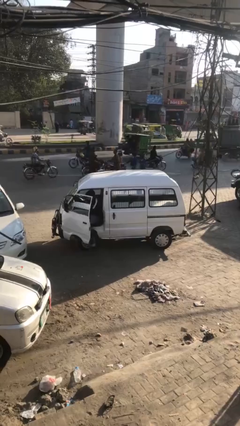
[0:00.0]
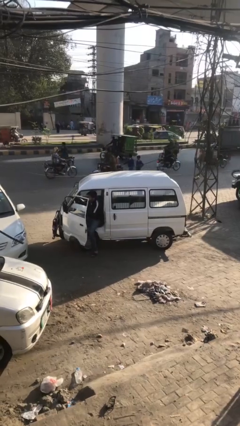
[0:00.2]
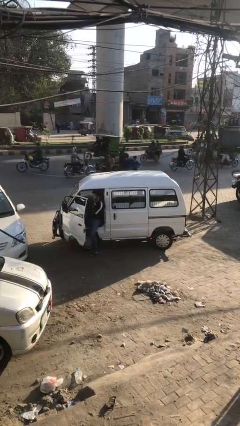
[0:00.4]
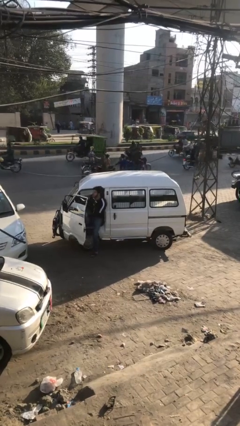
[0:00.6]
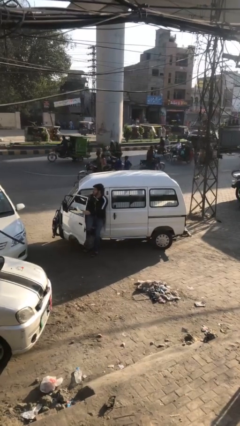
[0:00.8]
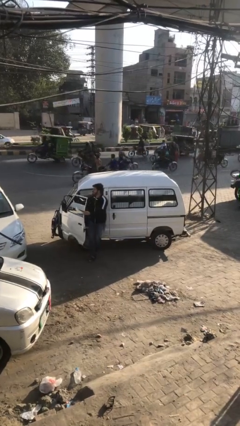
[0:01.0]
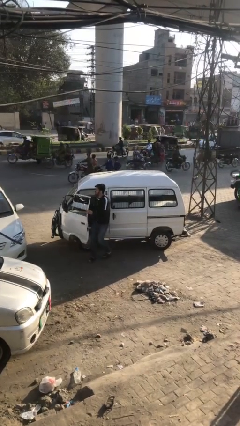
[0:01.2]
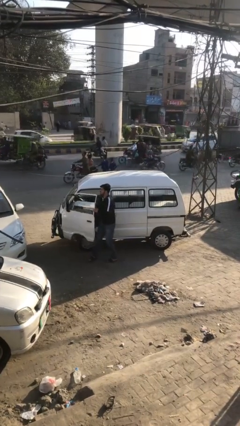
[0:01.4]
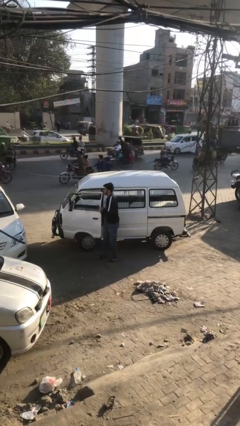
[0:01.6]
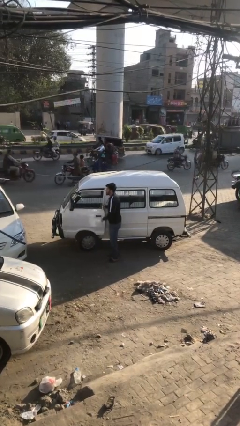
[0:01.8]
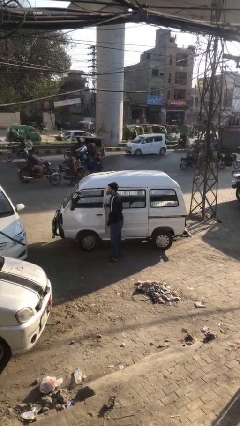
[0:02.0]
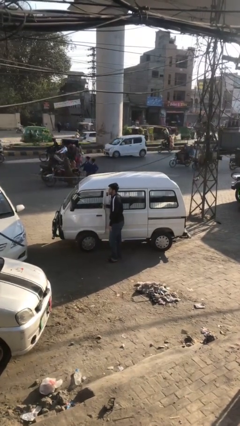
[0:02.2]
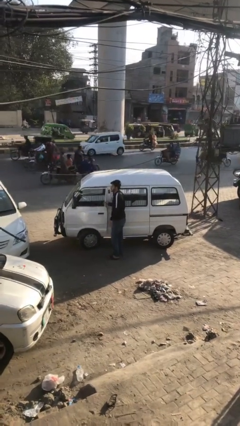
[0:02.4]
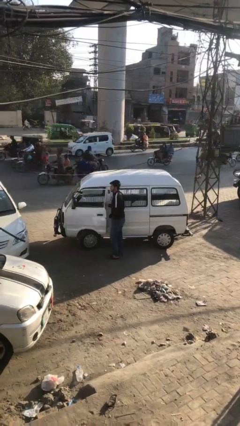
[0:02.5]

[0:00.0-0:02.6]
car drops off person

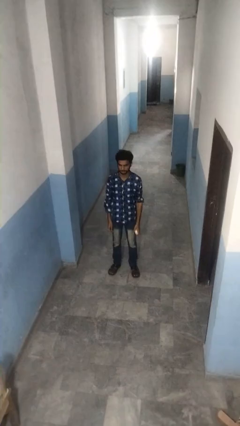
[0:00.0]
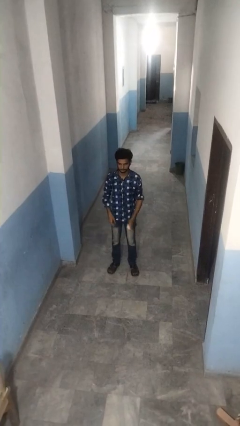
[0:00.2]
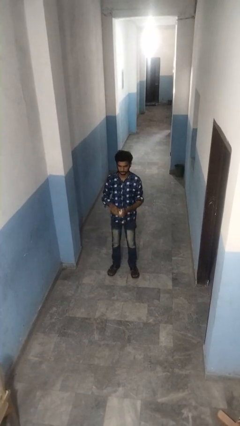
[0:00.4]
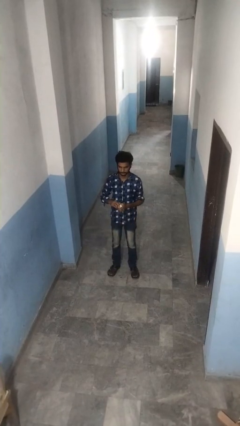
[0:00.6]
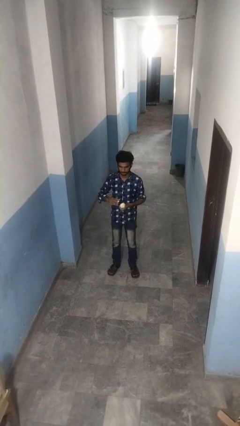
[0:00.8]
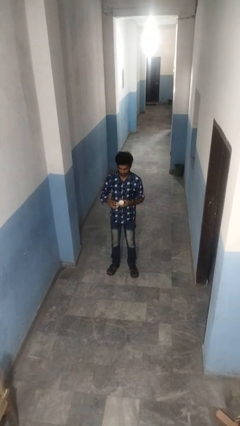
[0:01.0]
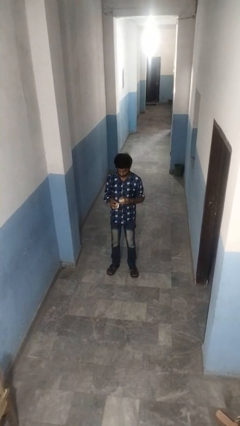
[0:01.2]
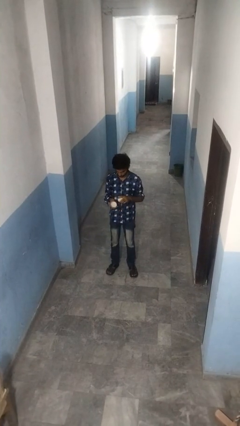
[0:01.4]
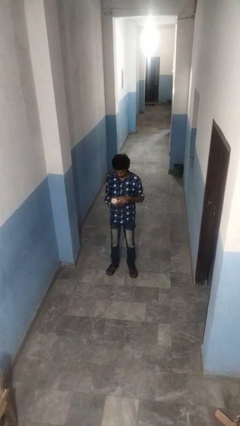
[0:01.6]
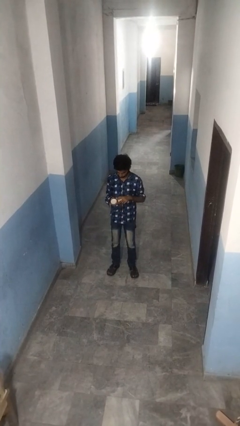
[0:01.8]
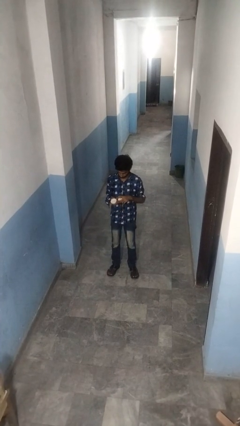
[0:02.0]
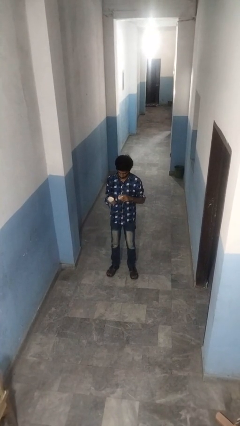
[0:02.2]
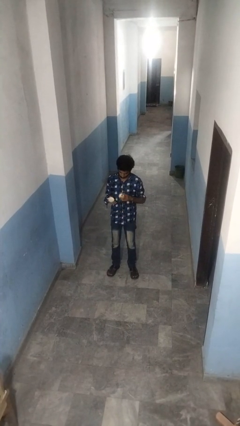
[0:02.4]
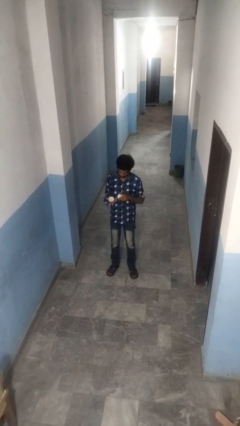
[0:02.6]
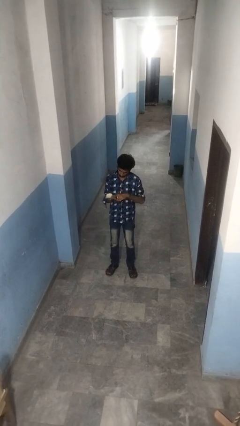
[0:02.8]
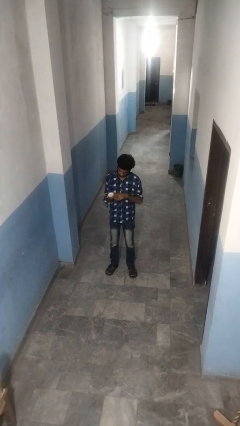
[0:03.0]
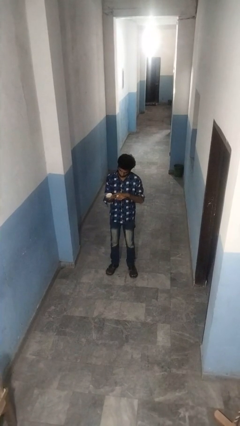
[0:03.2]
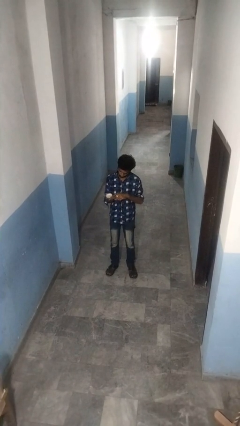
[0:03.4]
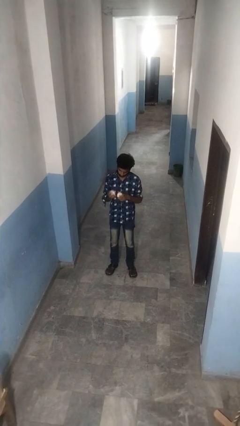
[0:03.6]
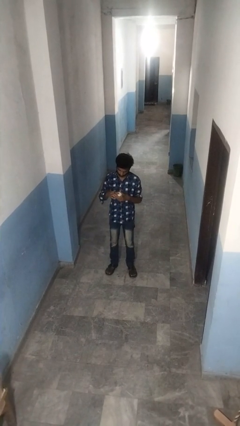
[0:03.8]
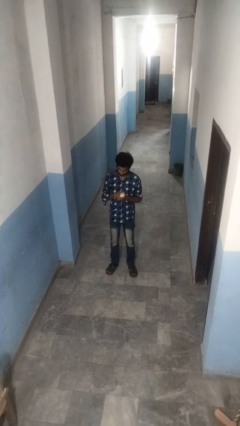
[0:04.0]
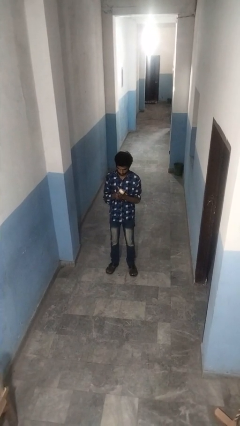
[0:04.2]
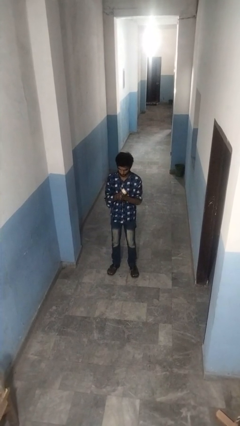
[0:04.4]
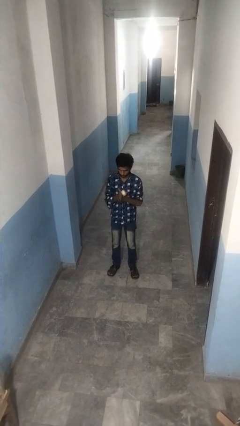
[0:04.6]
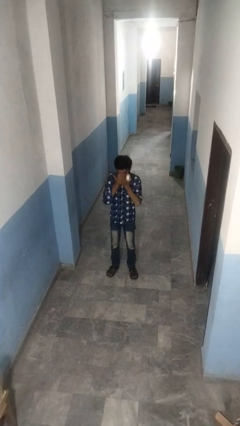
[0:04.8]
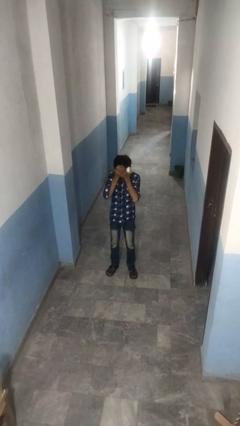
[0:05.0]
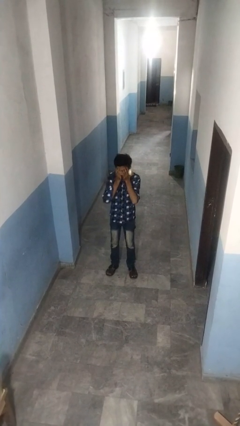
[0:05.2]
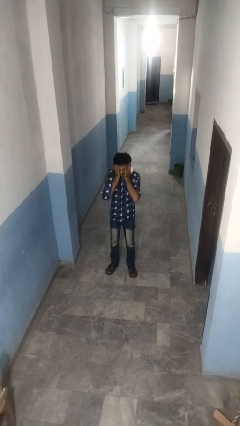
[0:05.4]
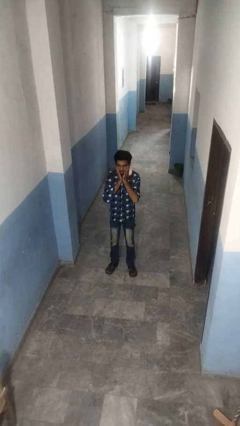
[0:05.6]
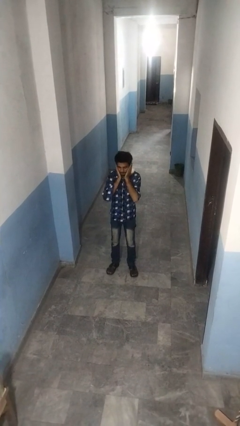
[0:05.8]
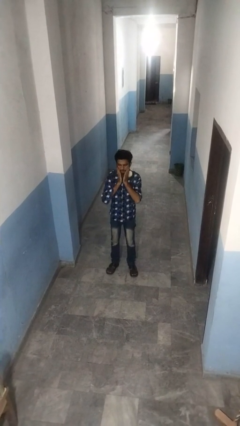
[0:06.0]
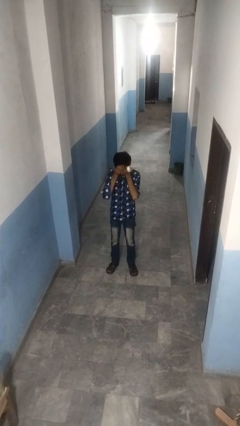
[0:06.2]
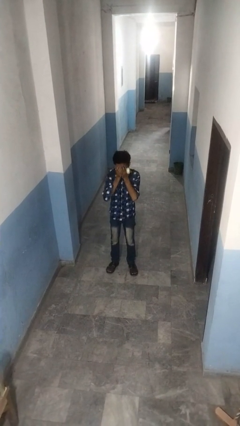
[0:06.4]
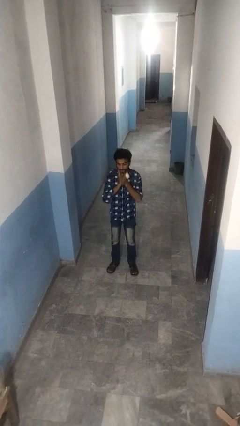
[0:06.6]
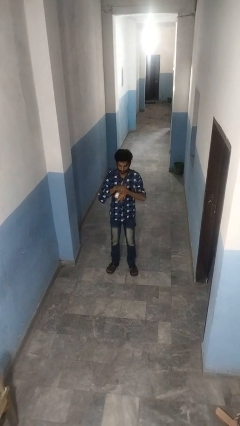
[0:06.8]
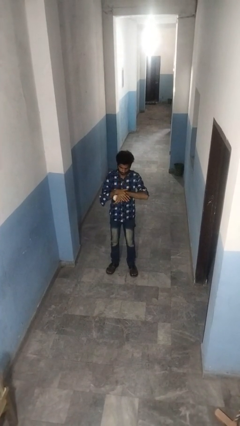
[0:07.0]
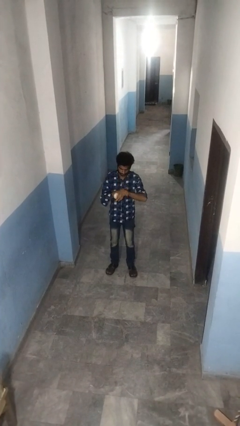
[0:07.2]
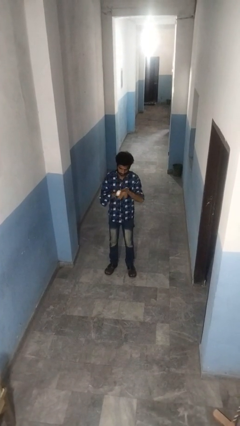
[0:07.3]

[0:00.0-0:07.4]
person applies facial moisturizer

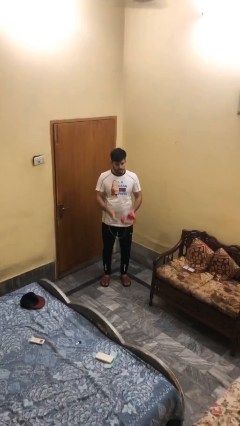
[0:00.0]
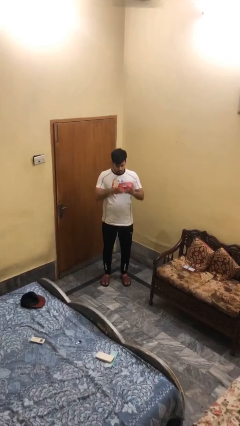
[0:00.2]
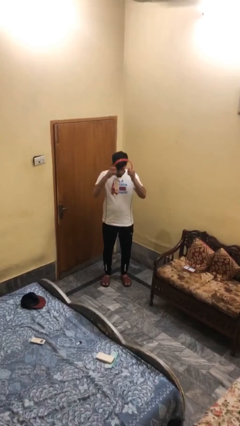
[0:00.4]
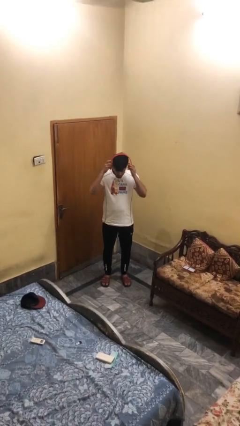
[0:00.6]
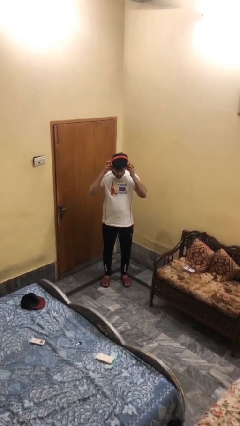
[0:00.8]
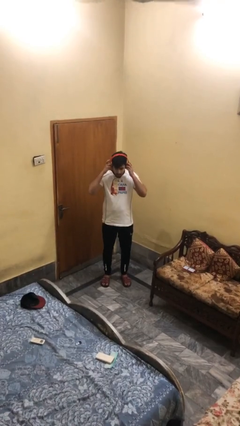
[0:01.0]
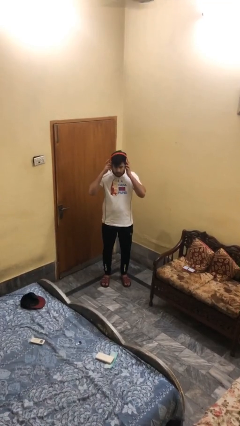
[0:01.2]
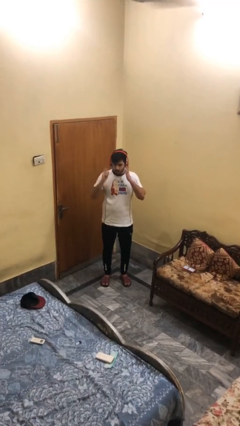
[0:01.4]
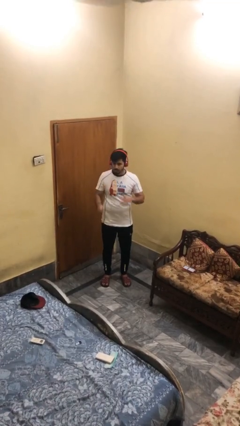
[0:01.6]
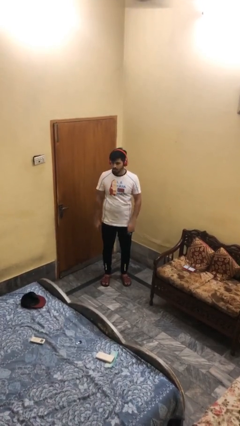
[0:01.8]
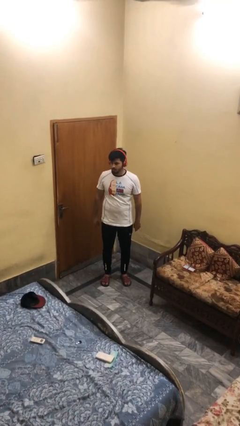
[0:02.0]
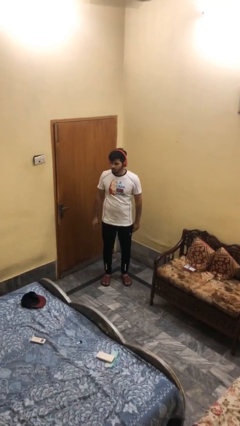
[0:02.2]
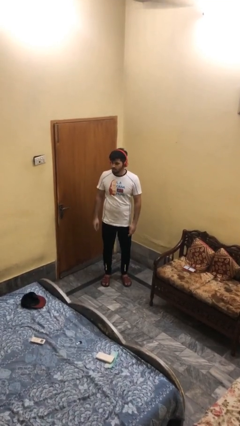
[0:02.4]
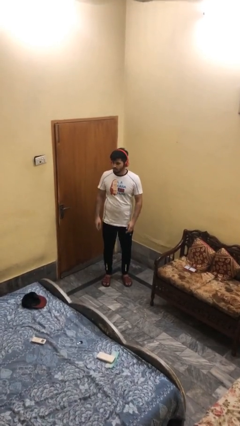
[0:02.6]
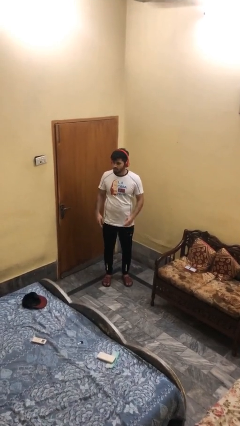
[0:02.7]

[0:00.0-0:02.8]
person puts on headphones

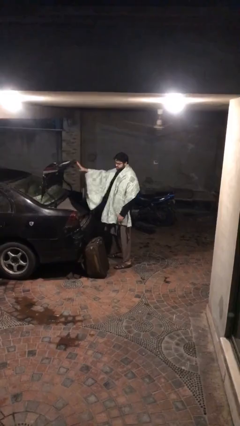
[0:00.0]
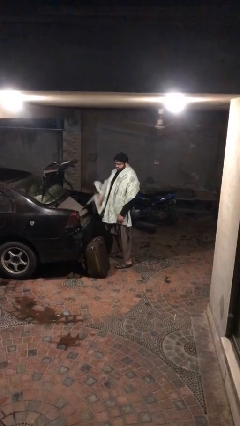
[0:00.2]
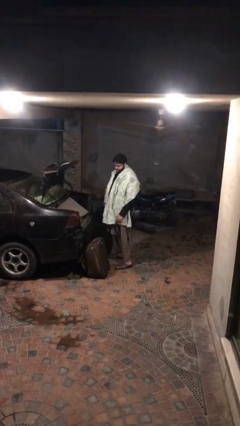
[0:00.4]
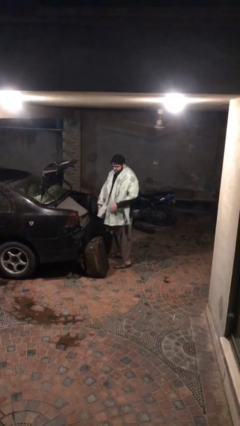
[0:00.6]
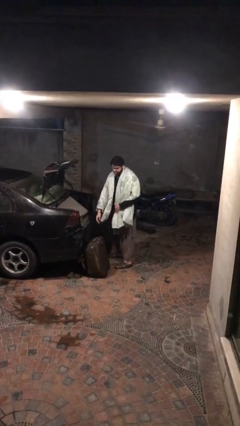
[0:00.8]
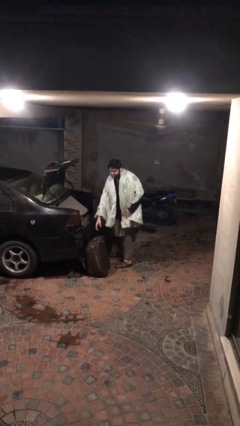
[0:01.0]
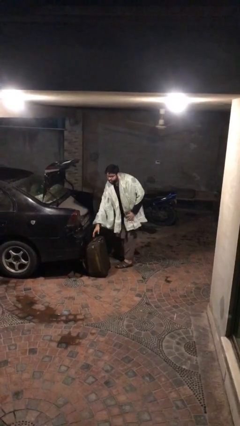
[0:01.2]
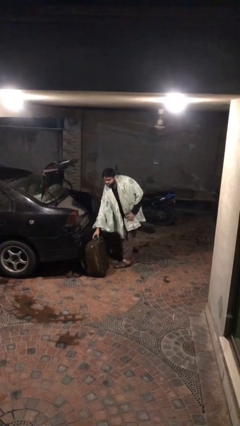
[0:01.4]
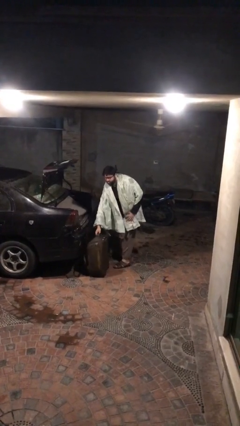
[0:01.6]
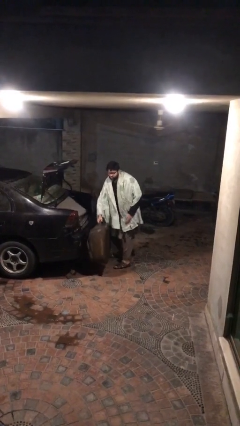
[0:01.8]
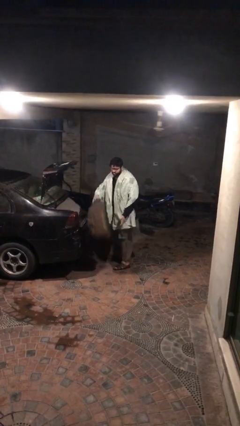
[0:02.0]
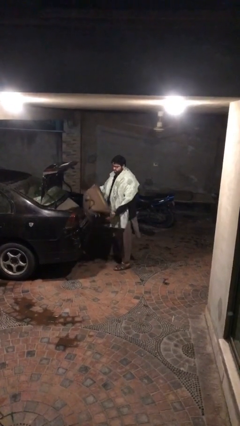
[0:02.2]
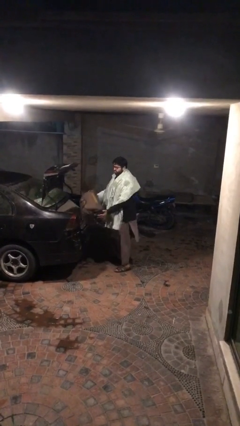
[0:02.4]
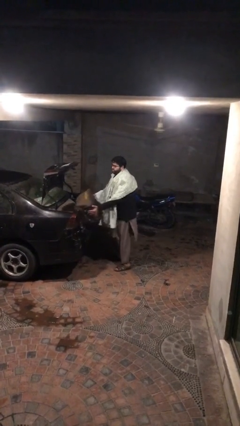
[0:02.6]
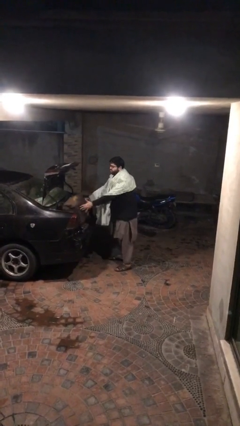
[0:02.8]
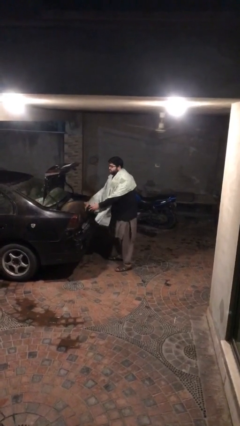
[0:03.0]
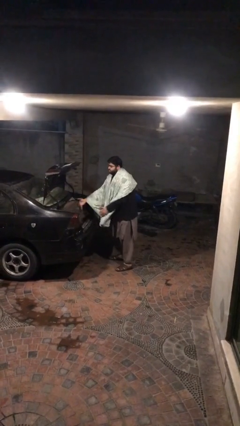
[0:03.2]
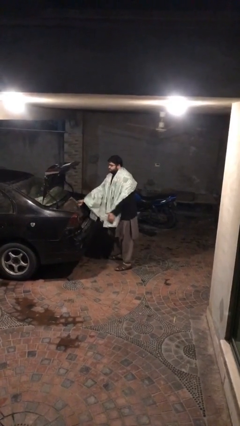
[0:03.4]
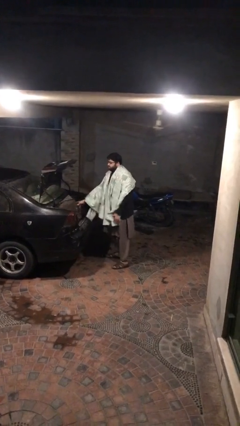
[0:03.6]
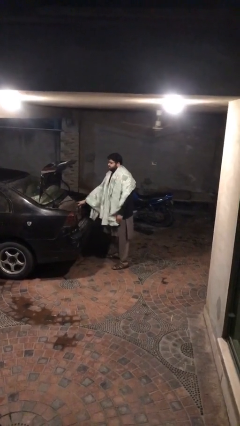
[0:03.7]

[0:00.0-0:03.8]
person loads car

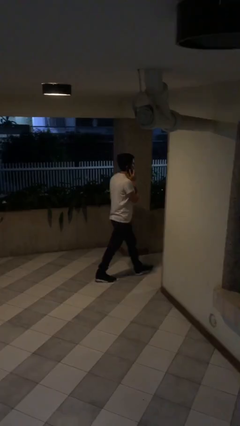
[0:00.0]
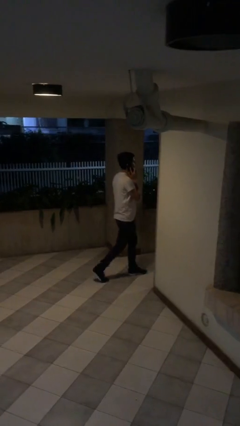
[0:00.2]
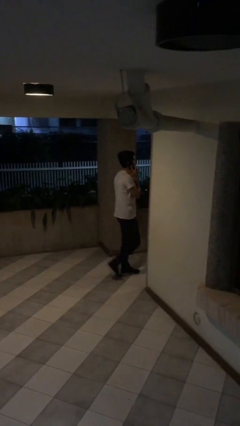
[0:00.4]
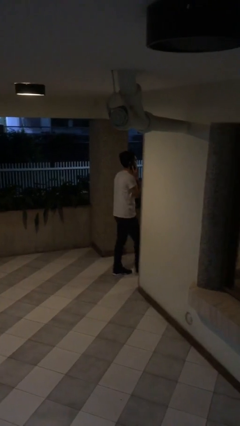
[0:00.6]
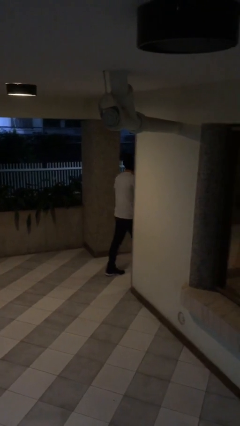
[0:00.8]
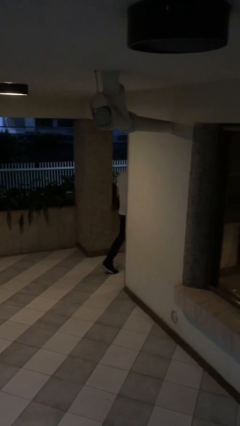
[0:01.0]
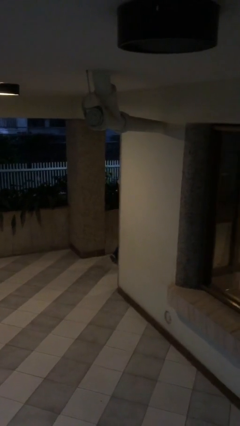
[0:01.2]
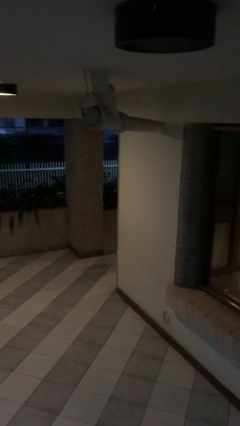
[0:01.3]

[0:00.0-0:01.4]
person exits scene through structure
